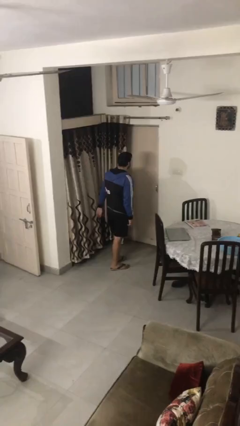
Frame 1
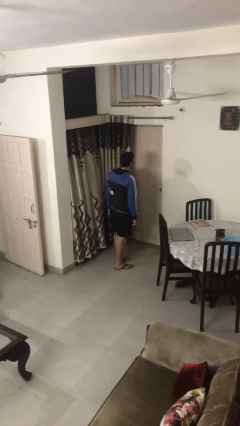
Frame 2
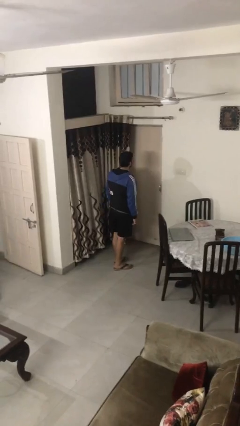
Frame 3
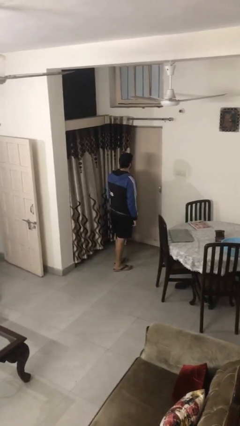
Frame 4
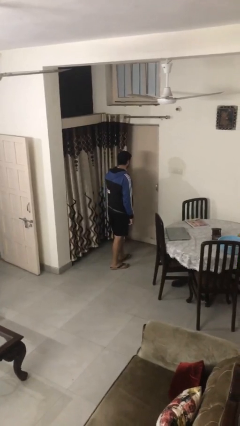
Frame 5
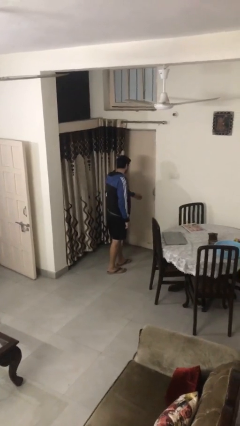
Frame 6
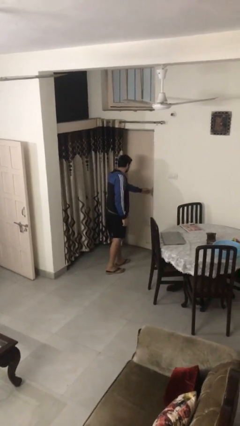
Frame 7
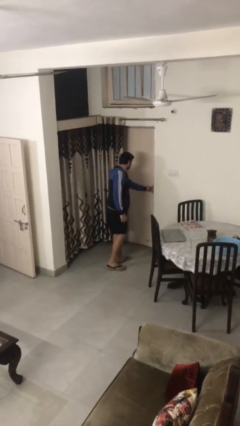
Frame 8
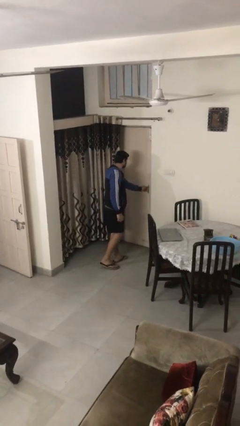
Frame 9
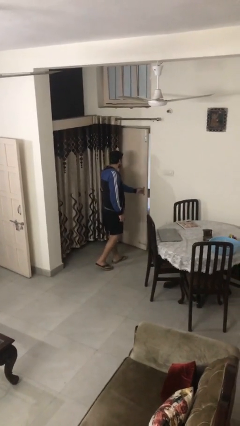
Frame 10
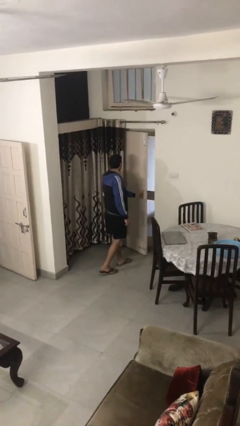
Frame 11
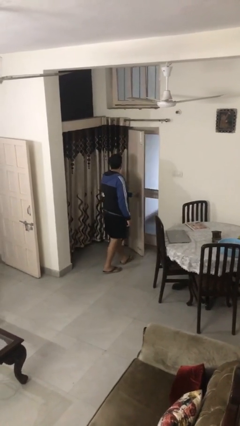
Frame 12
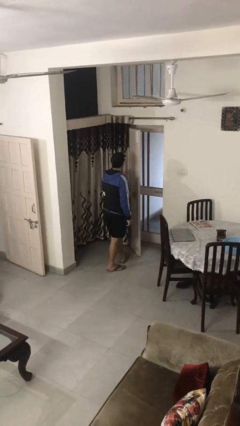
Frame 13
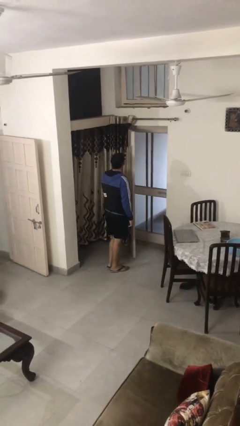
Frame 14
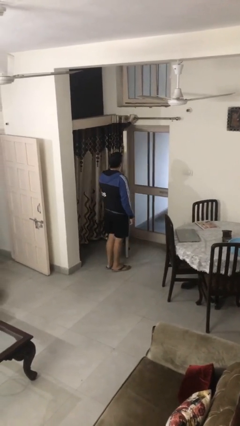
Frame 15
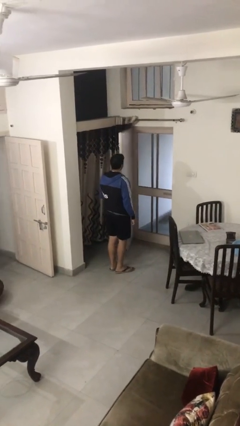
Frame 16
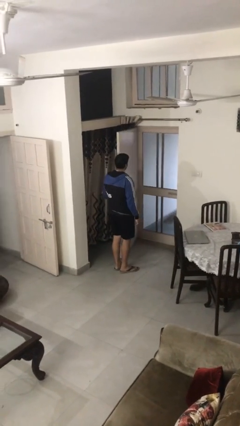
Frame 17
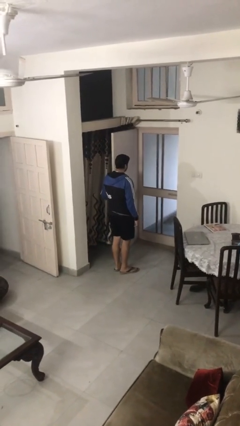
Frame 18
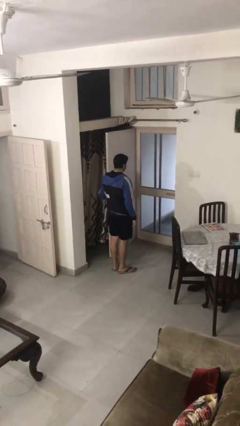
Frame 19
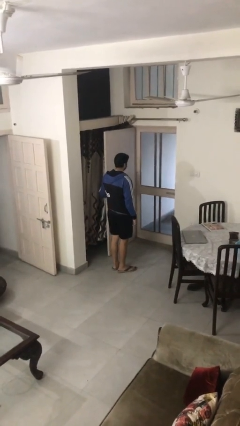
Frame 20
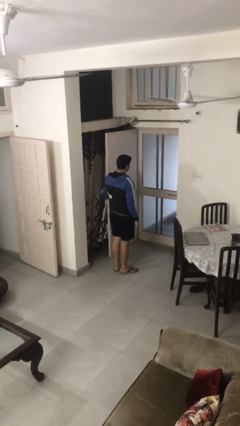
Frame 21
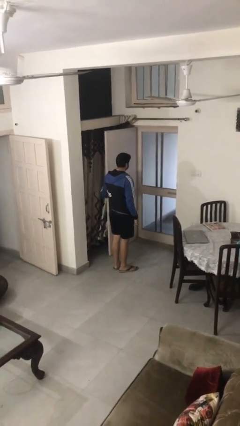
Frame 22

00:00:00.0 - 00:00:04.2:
person opens facility door

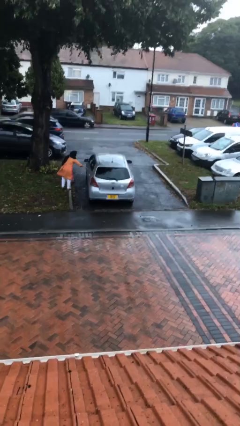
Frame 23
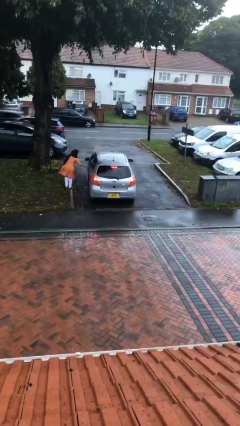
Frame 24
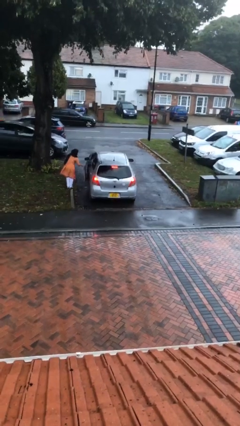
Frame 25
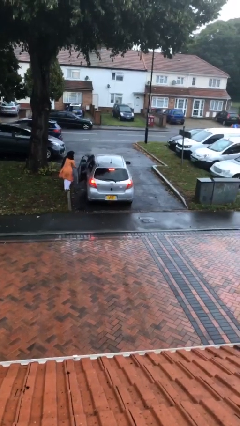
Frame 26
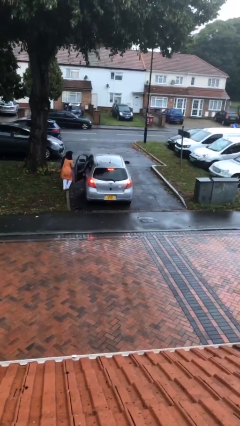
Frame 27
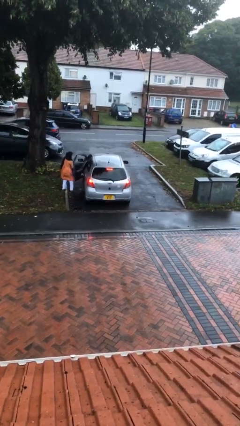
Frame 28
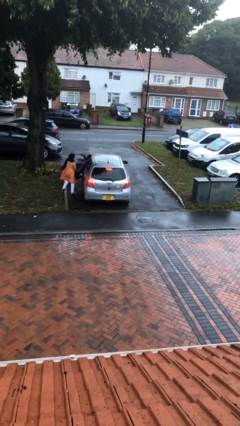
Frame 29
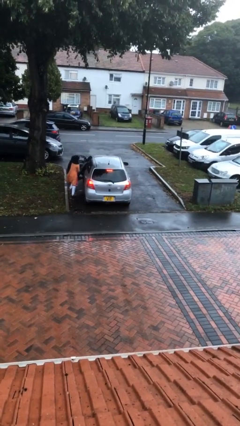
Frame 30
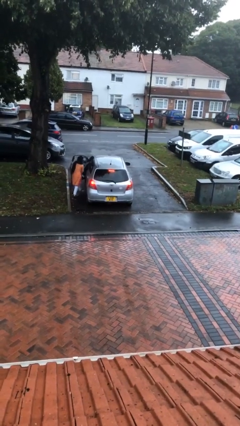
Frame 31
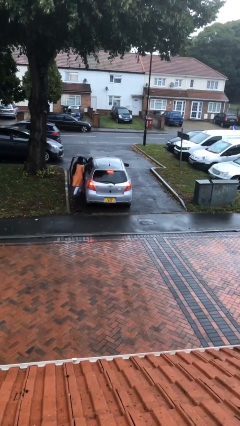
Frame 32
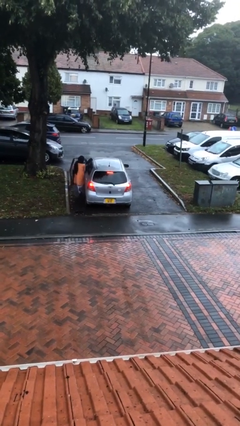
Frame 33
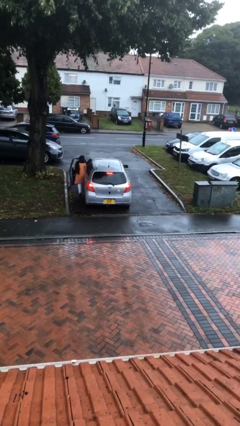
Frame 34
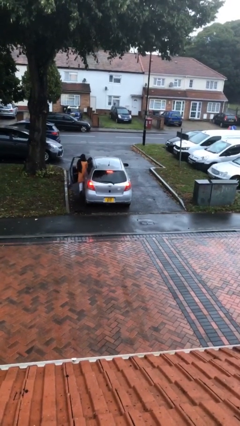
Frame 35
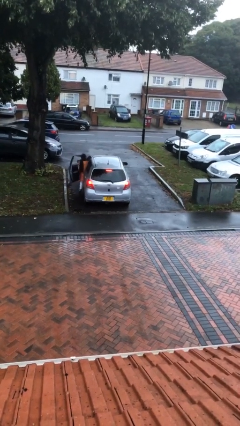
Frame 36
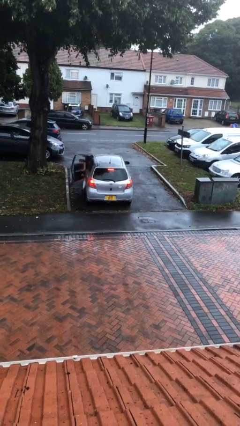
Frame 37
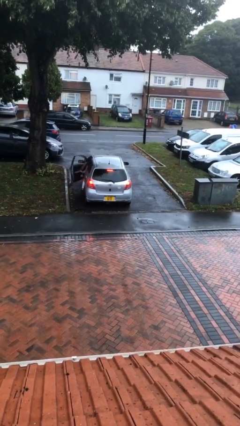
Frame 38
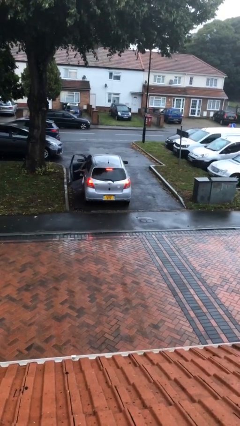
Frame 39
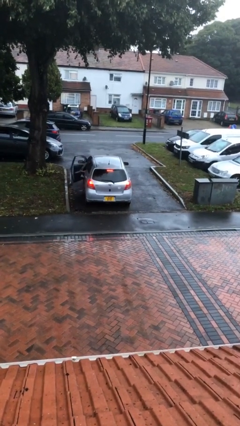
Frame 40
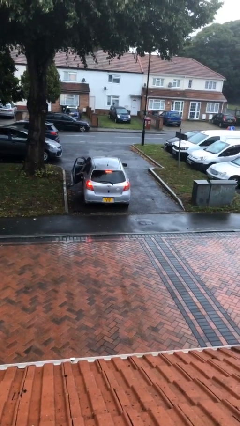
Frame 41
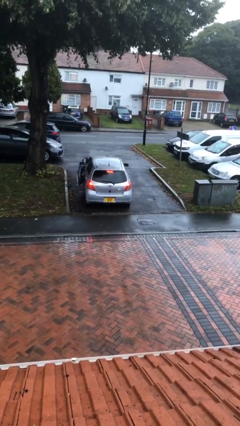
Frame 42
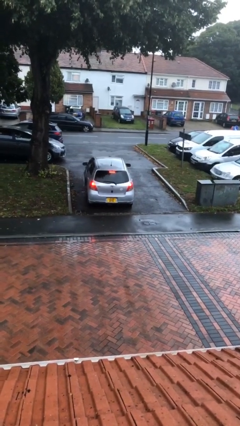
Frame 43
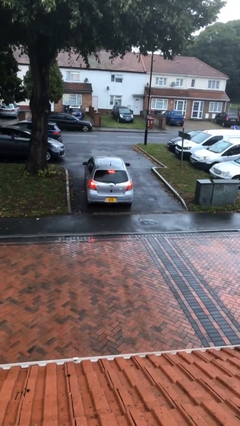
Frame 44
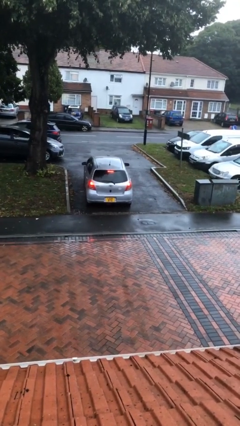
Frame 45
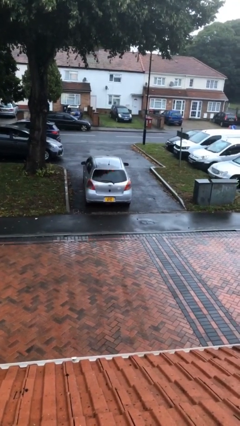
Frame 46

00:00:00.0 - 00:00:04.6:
car picks up person

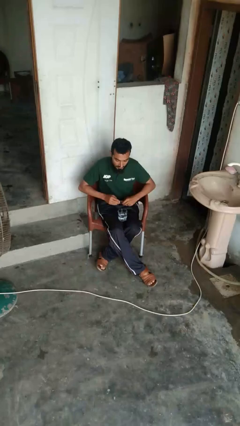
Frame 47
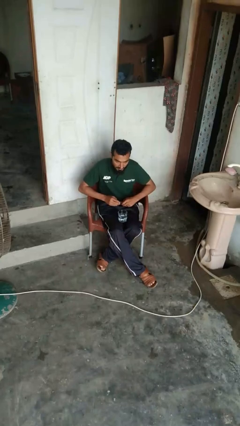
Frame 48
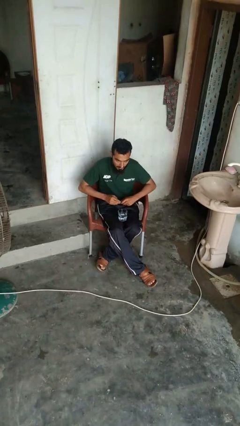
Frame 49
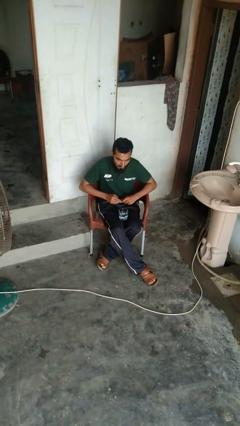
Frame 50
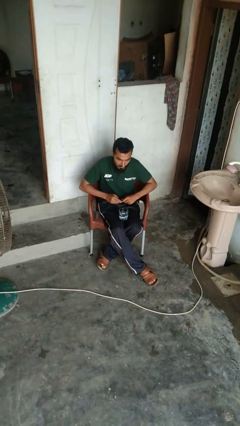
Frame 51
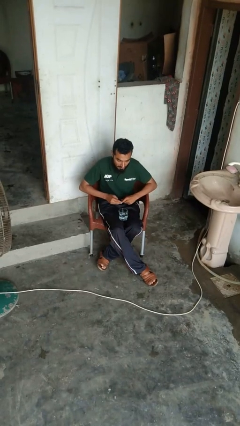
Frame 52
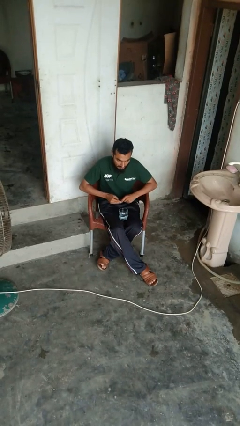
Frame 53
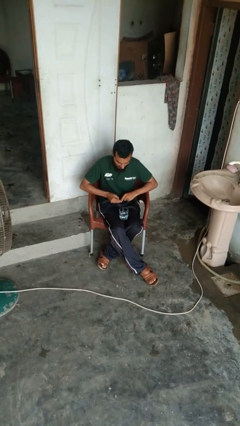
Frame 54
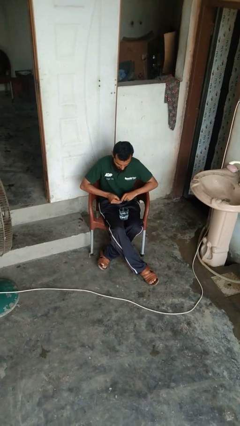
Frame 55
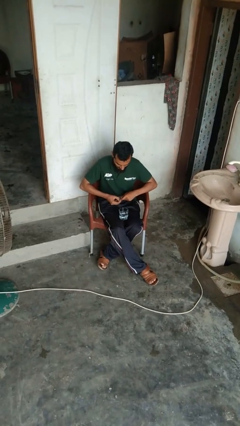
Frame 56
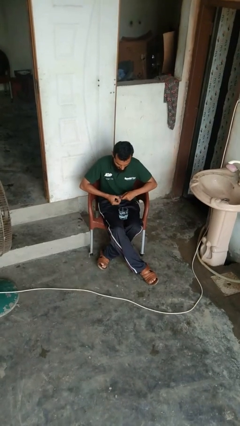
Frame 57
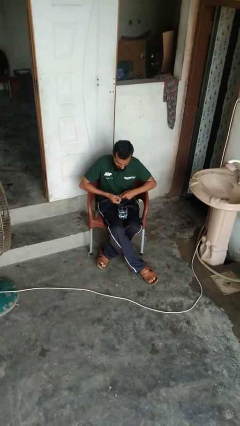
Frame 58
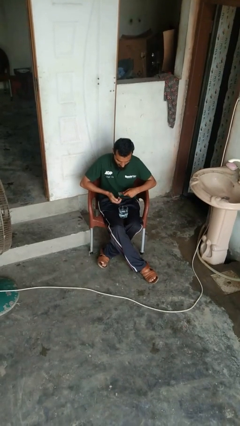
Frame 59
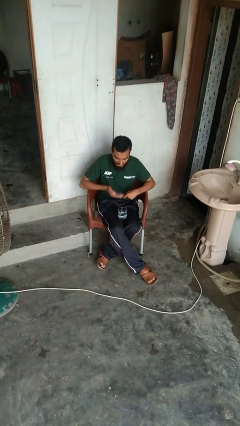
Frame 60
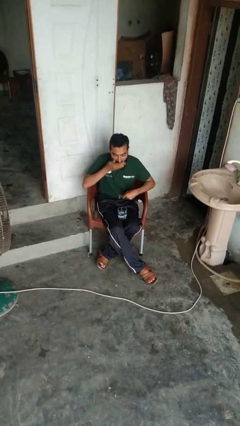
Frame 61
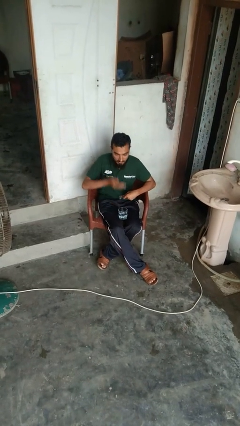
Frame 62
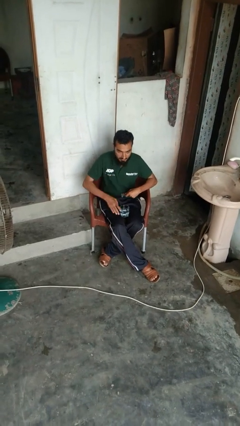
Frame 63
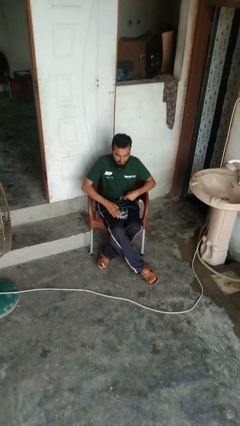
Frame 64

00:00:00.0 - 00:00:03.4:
person takes medicine pills

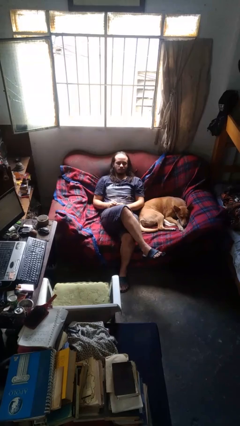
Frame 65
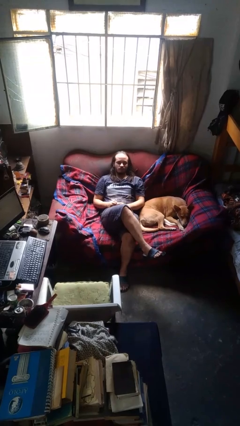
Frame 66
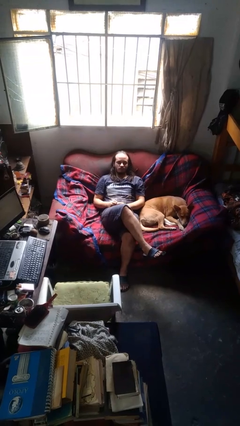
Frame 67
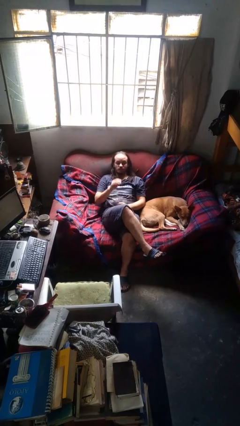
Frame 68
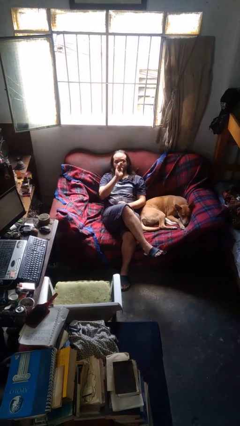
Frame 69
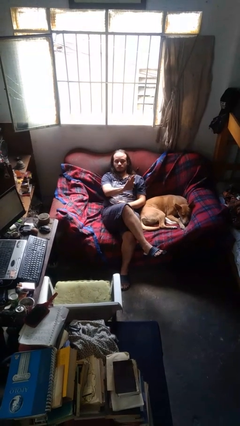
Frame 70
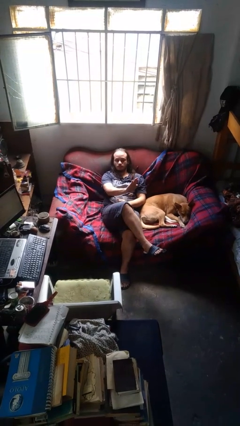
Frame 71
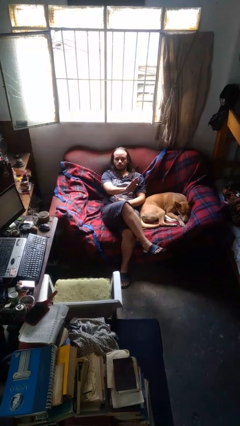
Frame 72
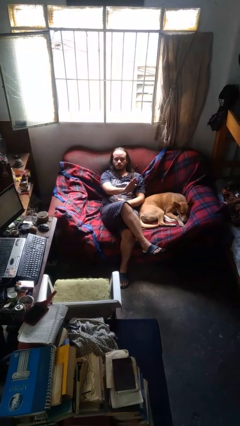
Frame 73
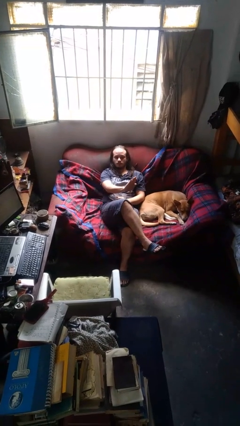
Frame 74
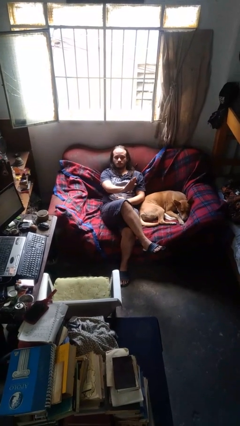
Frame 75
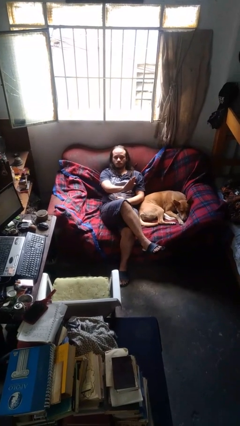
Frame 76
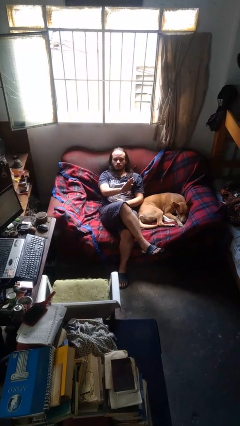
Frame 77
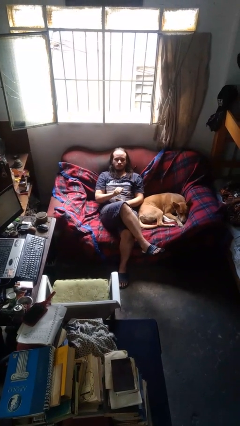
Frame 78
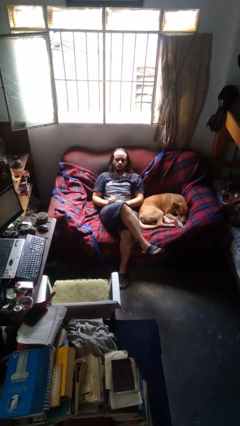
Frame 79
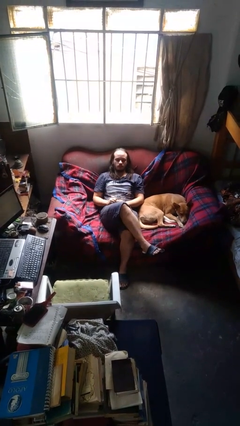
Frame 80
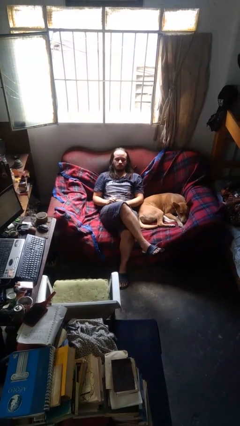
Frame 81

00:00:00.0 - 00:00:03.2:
person gestures stop

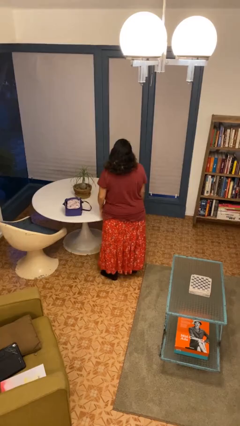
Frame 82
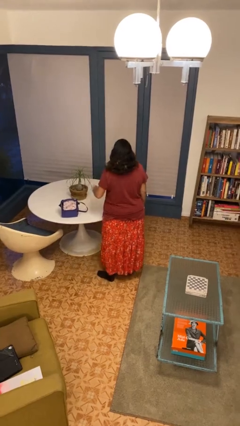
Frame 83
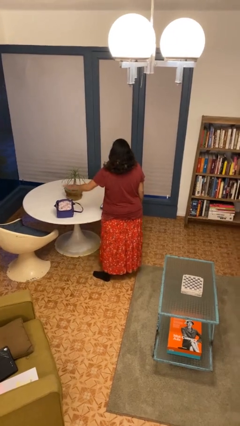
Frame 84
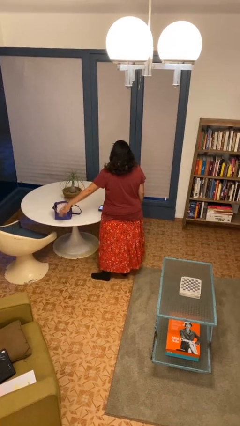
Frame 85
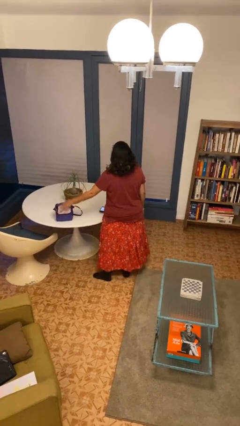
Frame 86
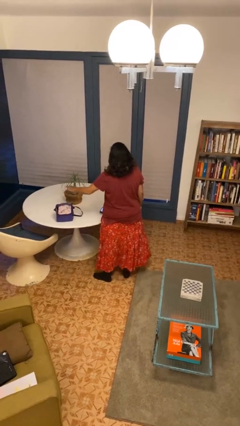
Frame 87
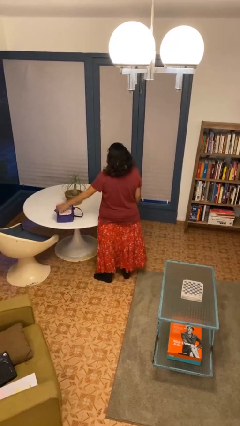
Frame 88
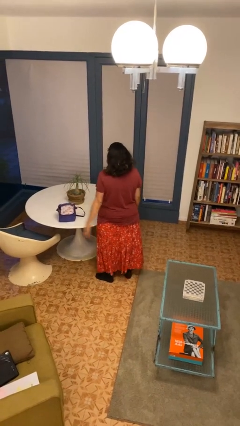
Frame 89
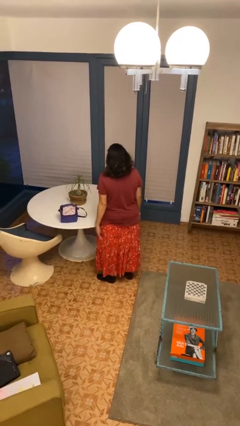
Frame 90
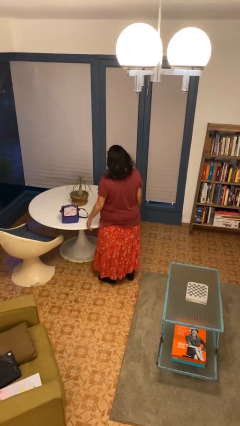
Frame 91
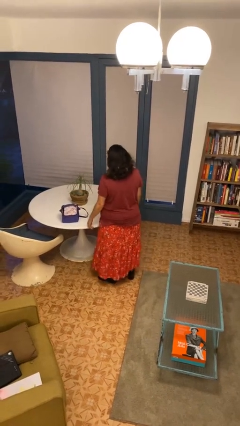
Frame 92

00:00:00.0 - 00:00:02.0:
person waves hand over object
